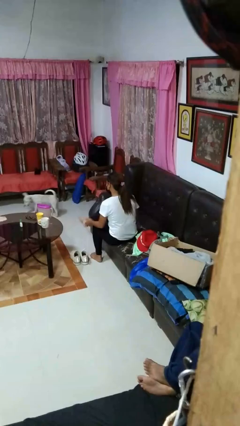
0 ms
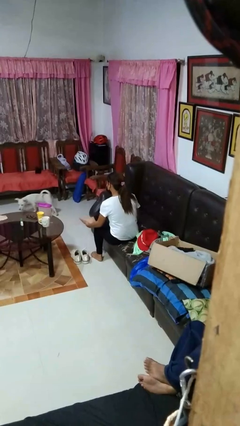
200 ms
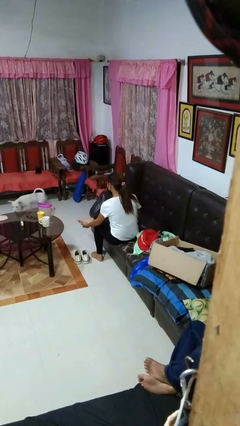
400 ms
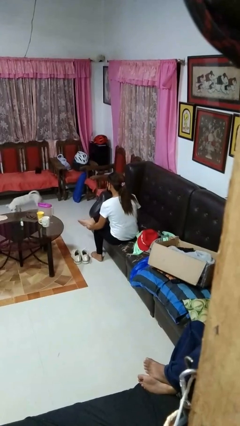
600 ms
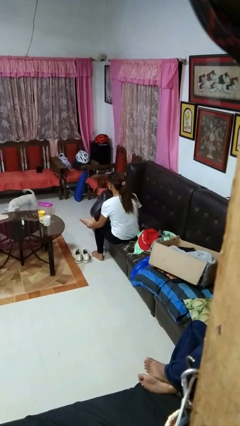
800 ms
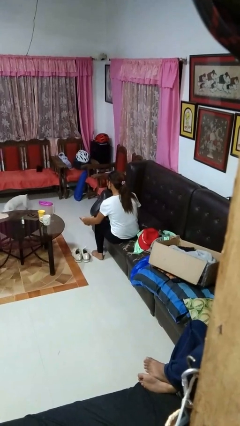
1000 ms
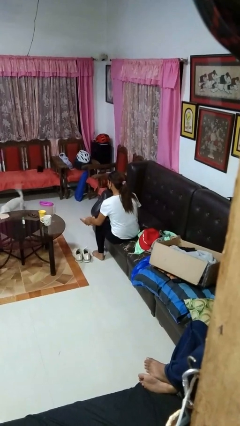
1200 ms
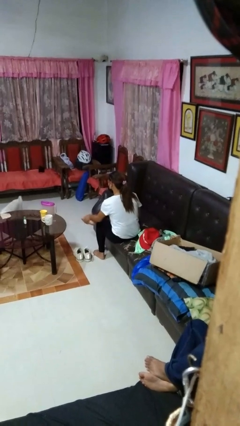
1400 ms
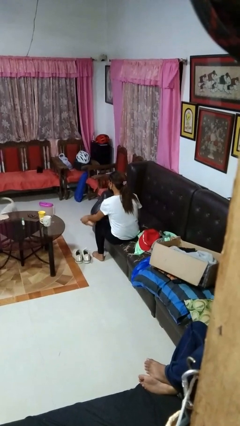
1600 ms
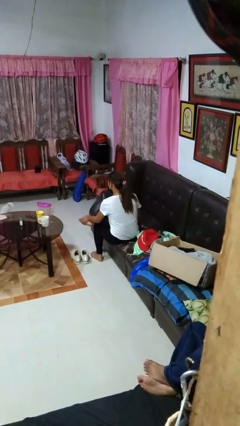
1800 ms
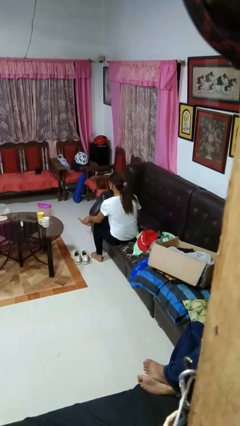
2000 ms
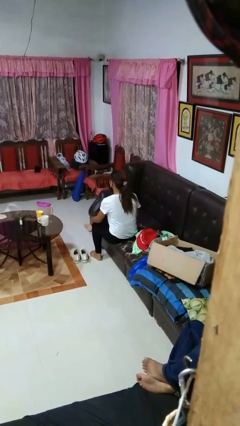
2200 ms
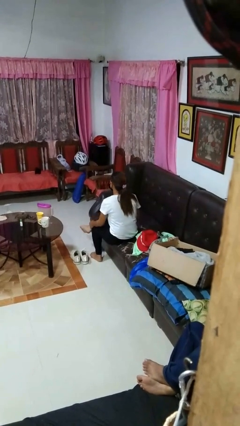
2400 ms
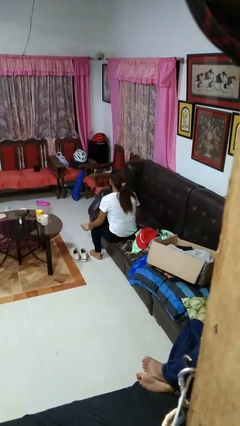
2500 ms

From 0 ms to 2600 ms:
person rubs foot

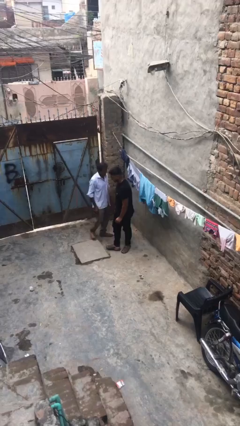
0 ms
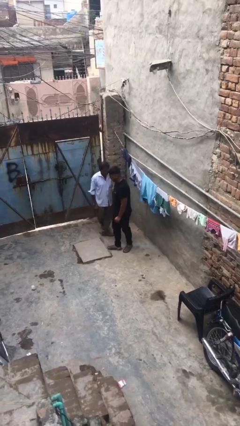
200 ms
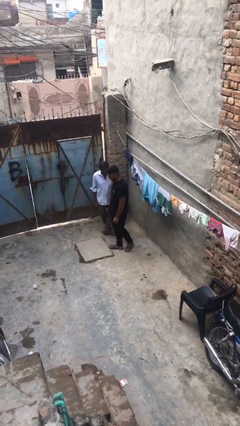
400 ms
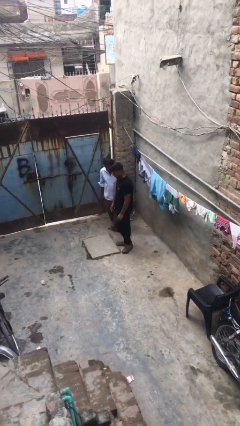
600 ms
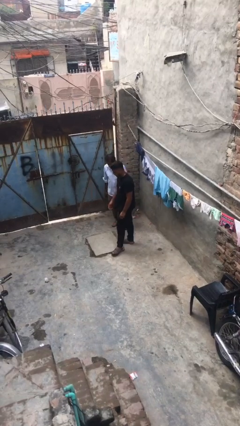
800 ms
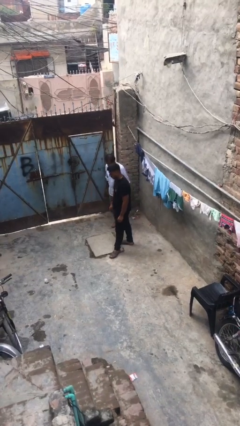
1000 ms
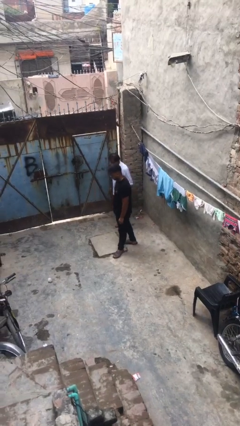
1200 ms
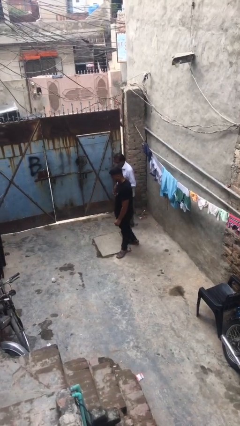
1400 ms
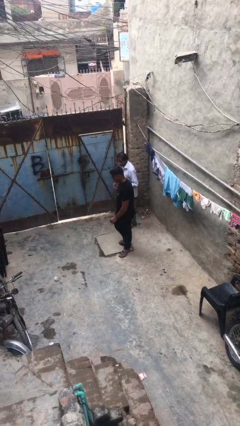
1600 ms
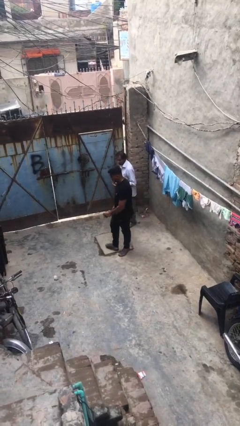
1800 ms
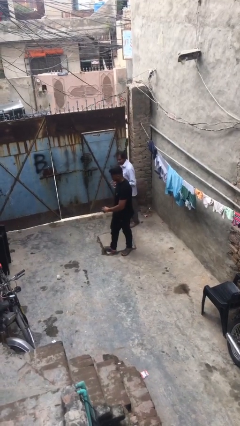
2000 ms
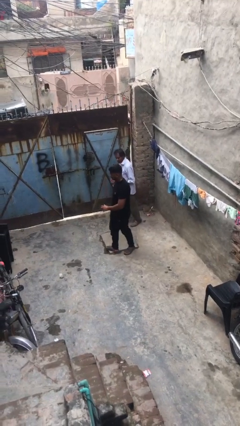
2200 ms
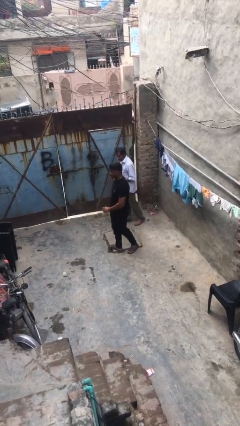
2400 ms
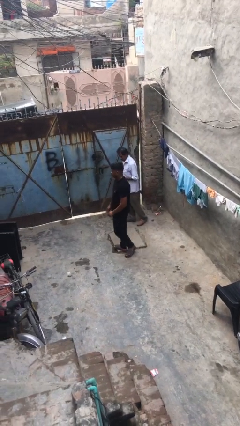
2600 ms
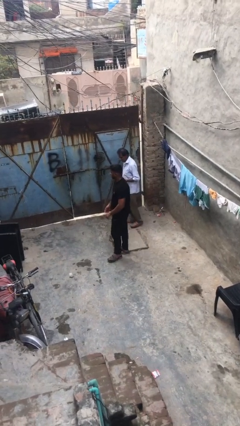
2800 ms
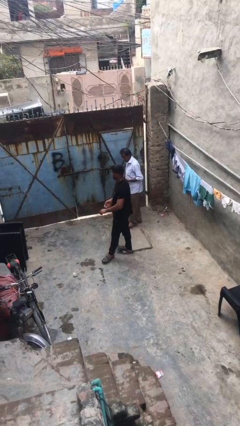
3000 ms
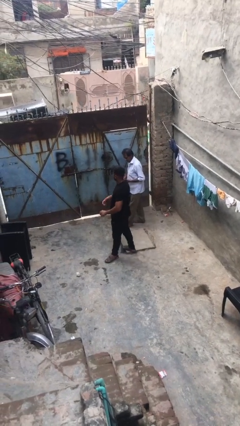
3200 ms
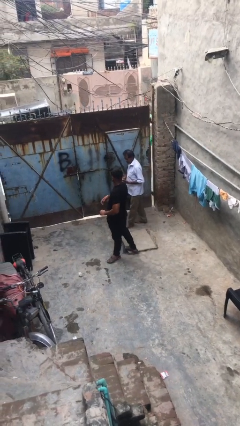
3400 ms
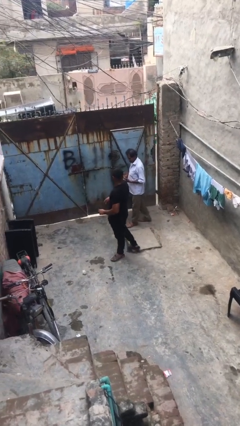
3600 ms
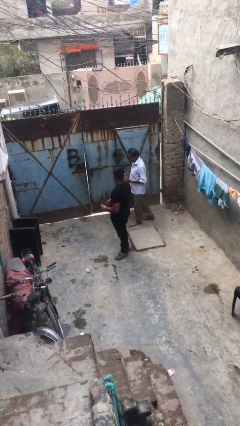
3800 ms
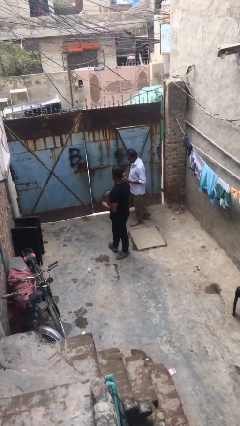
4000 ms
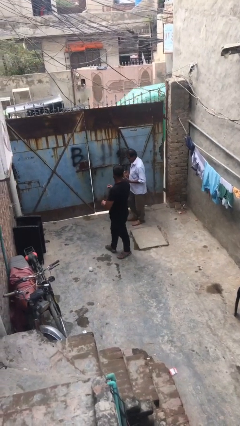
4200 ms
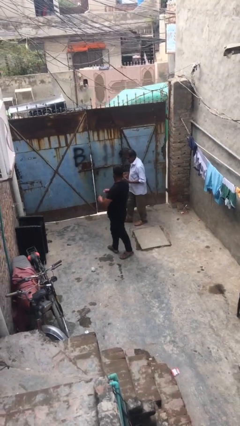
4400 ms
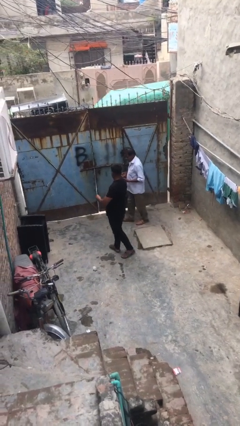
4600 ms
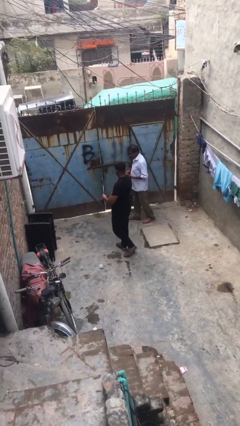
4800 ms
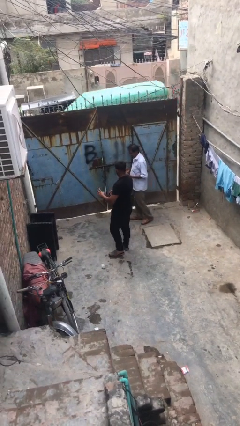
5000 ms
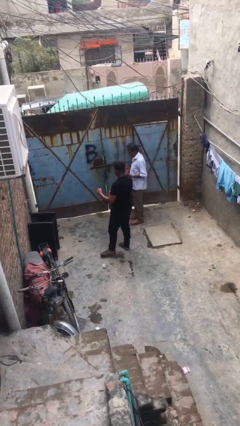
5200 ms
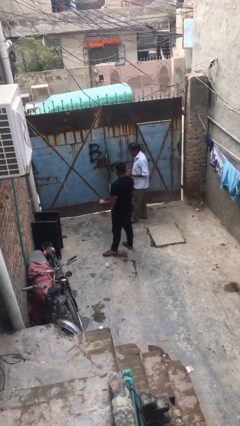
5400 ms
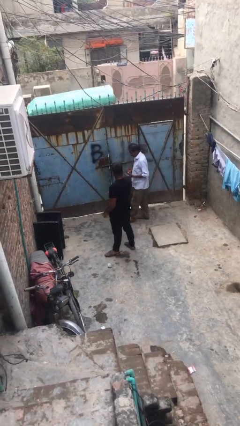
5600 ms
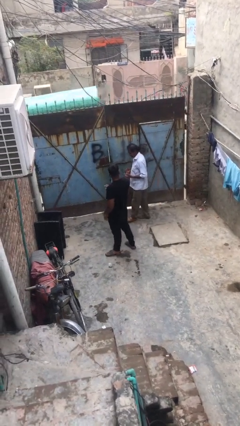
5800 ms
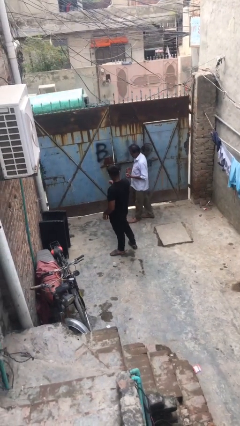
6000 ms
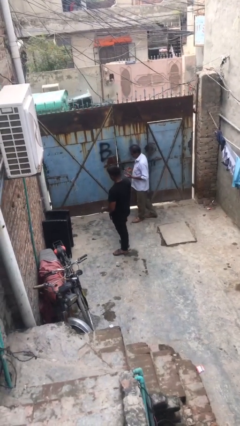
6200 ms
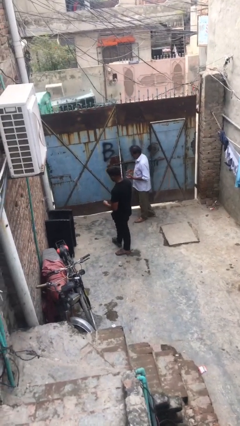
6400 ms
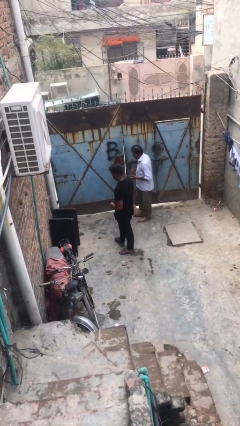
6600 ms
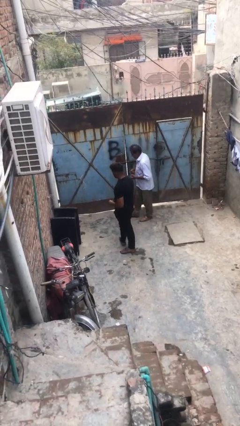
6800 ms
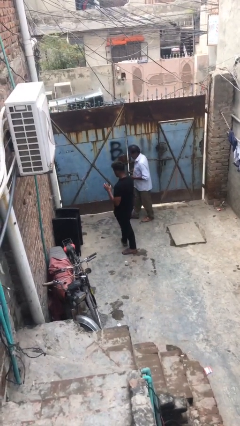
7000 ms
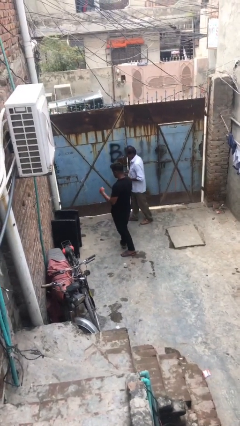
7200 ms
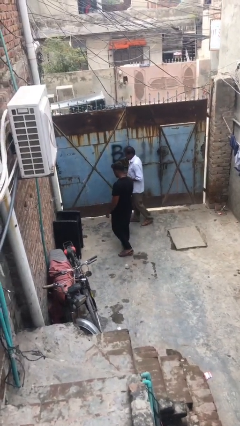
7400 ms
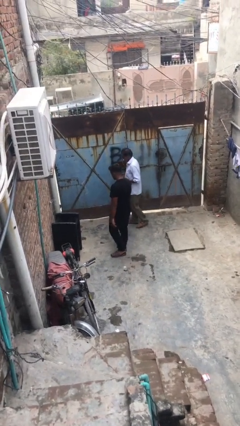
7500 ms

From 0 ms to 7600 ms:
person talks to person

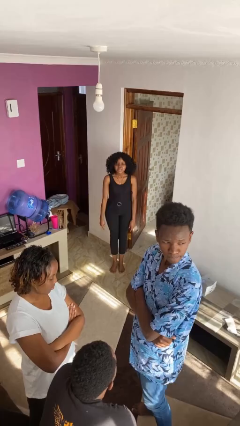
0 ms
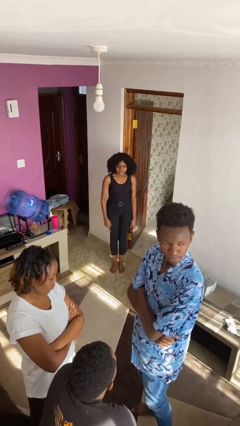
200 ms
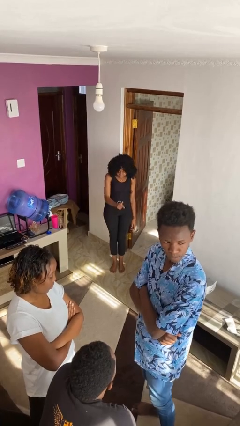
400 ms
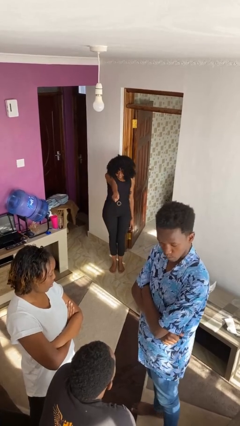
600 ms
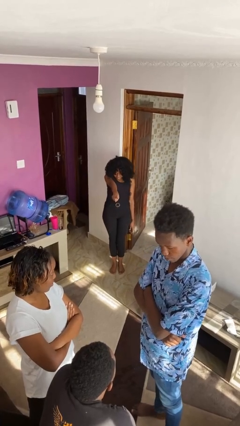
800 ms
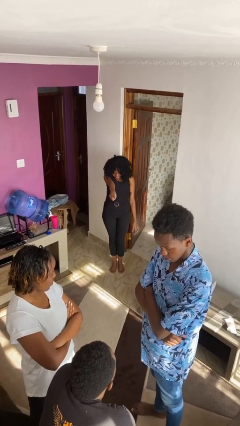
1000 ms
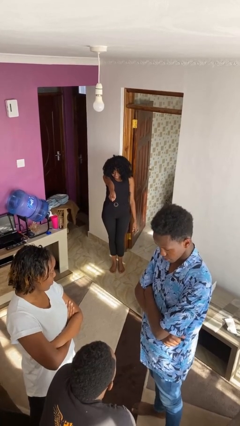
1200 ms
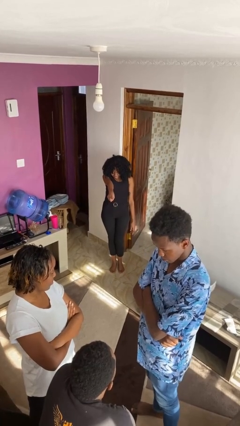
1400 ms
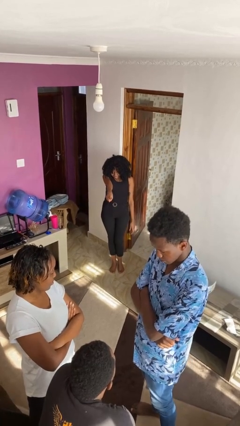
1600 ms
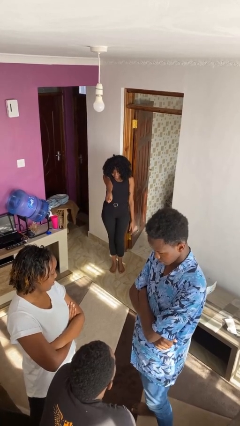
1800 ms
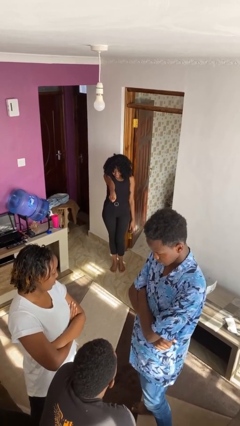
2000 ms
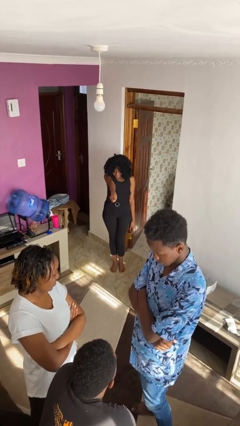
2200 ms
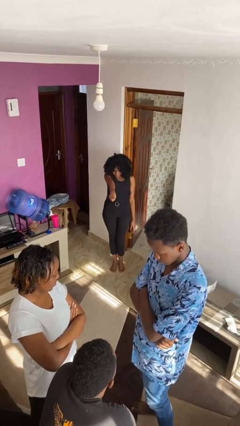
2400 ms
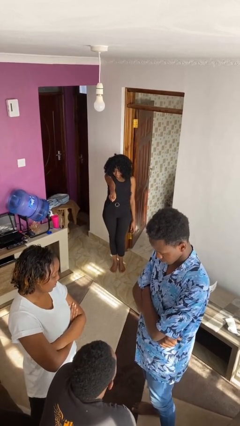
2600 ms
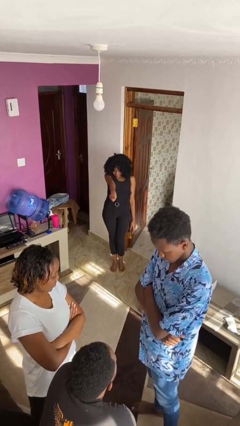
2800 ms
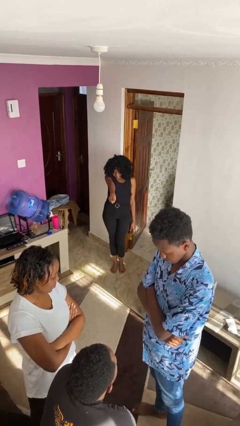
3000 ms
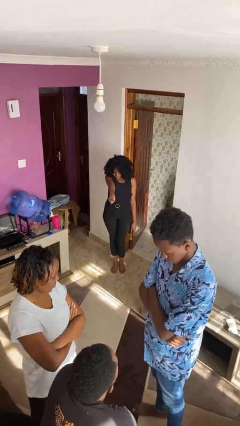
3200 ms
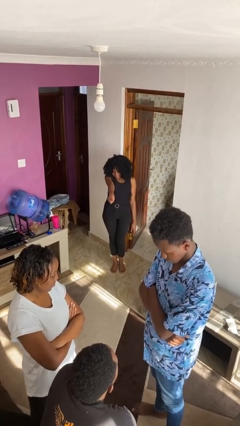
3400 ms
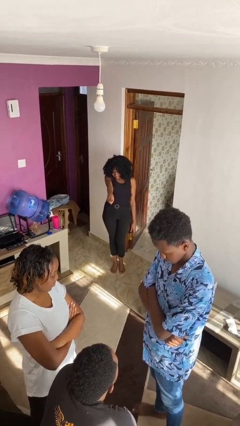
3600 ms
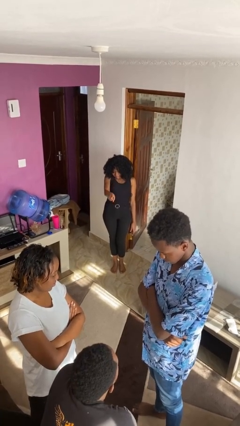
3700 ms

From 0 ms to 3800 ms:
person points at person

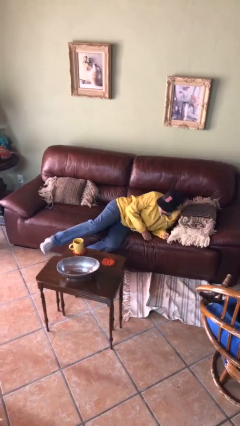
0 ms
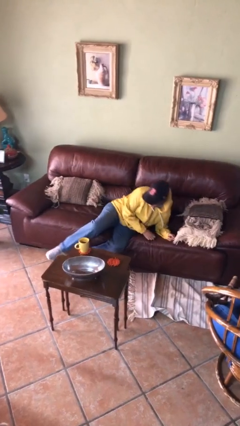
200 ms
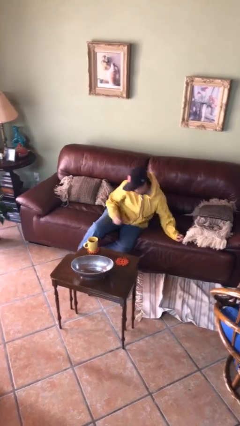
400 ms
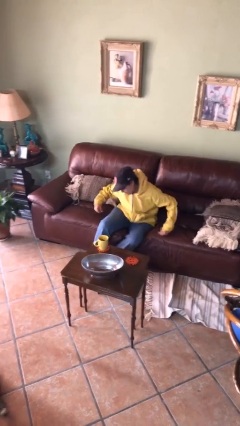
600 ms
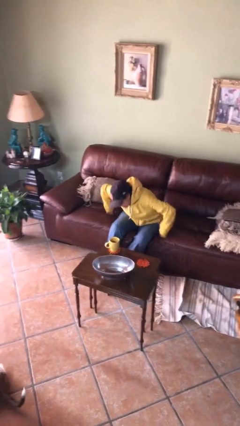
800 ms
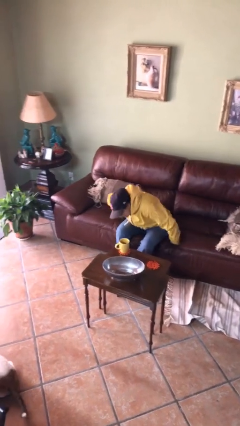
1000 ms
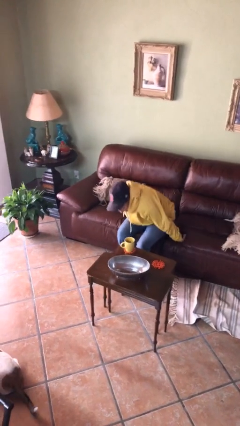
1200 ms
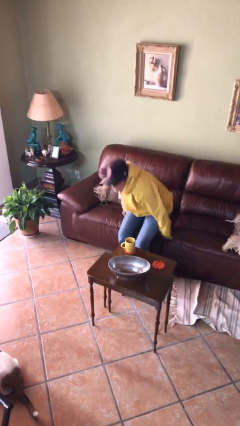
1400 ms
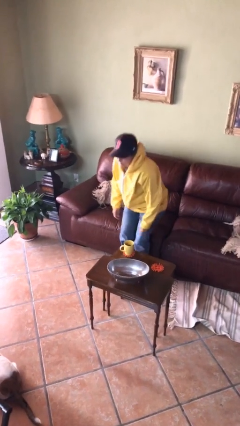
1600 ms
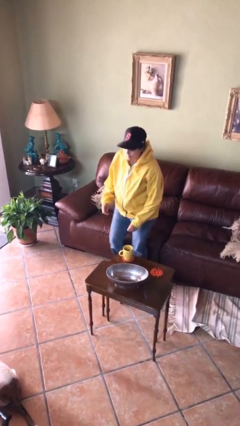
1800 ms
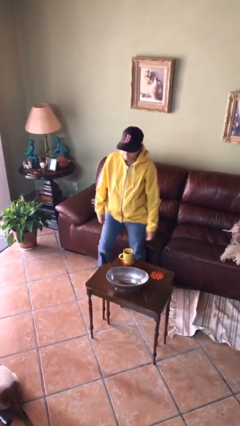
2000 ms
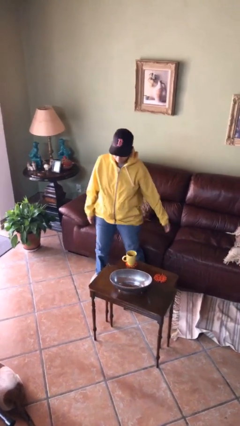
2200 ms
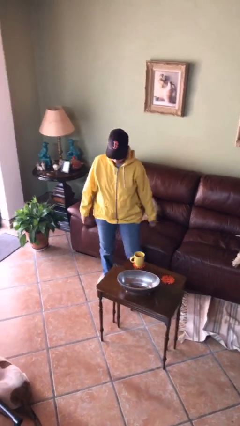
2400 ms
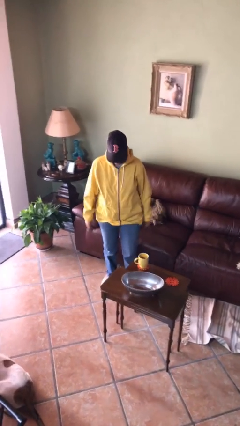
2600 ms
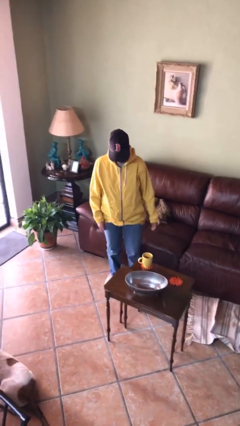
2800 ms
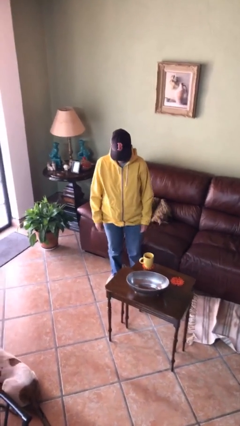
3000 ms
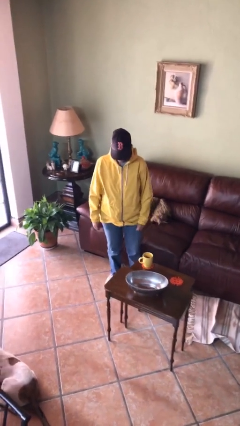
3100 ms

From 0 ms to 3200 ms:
person stands up

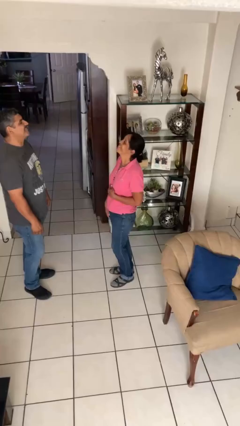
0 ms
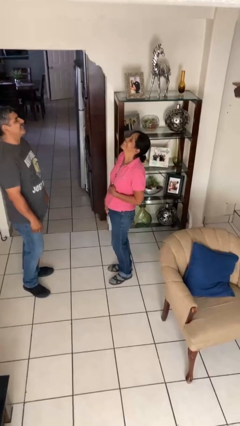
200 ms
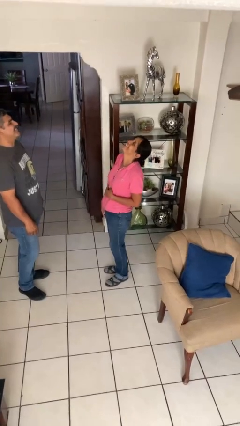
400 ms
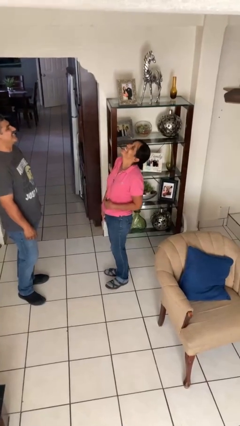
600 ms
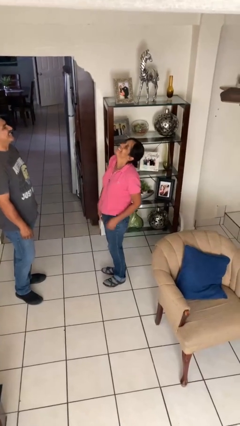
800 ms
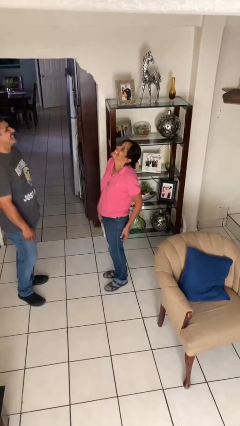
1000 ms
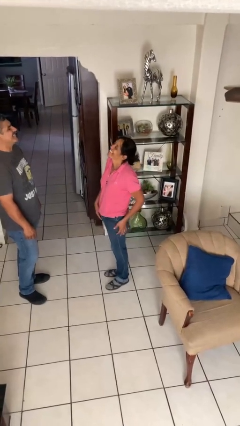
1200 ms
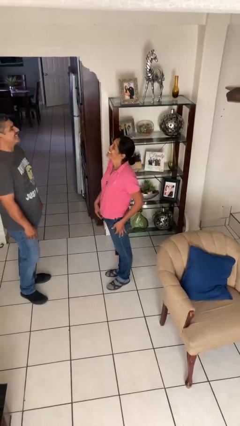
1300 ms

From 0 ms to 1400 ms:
person laughs with person
